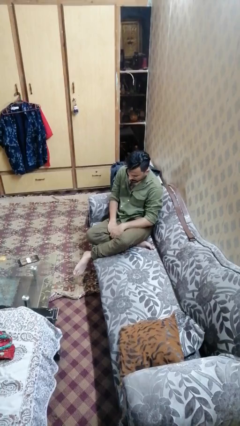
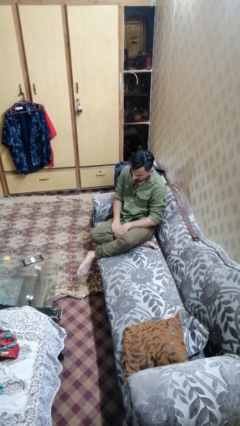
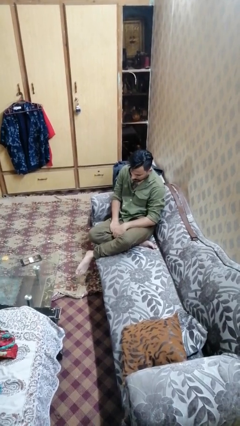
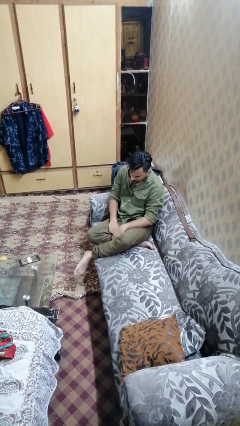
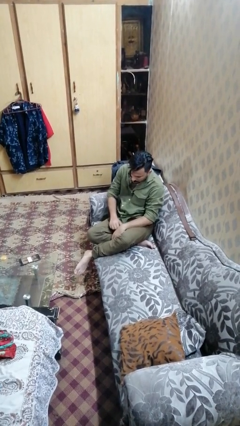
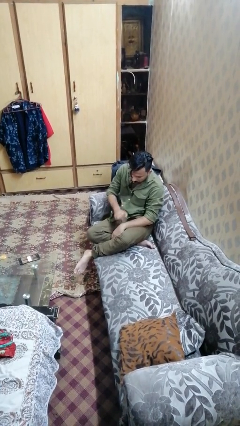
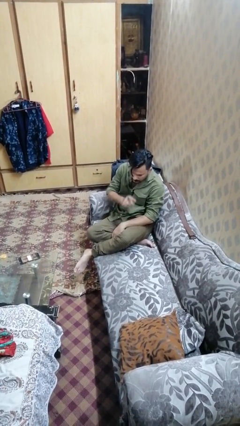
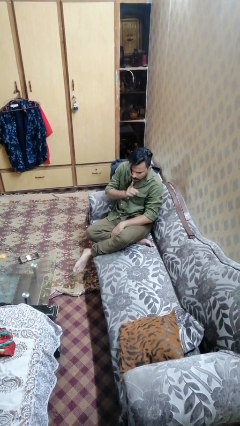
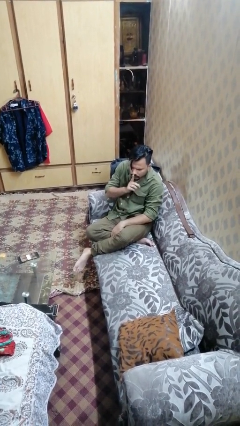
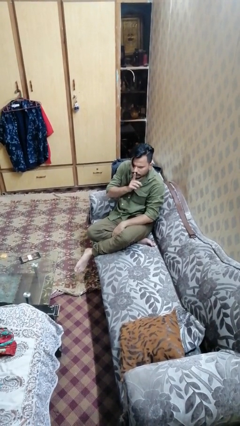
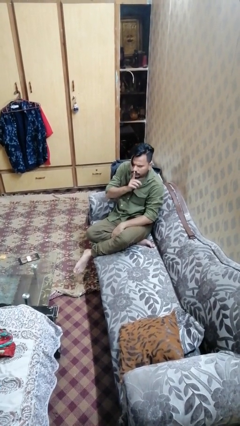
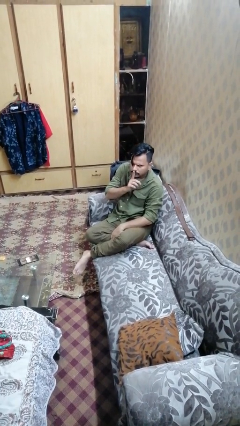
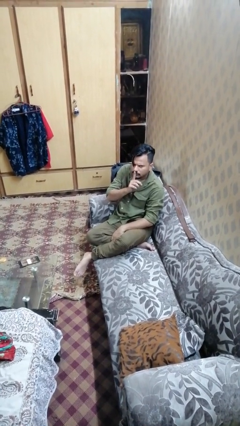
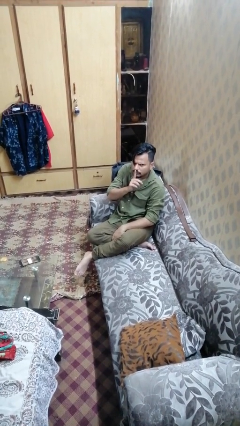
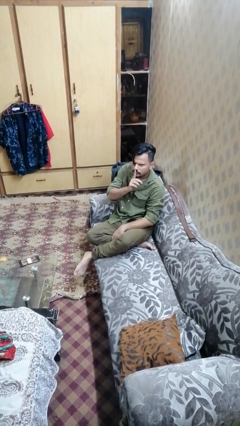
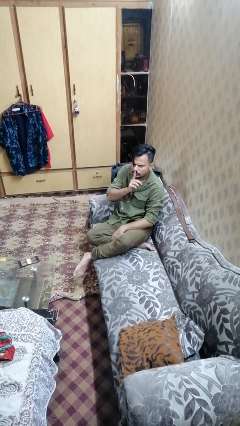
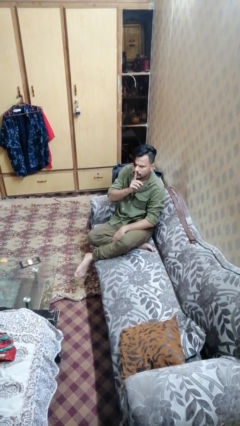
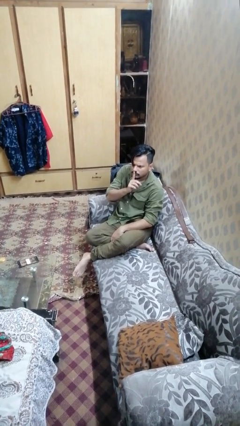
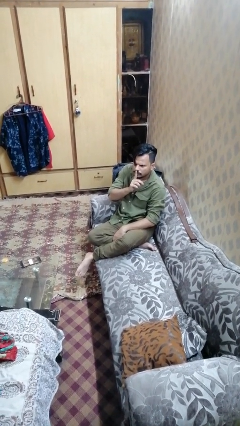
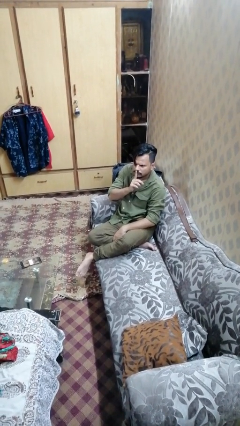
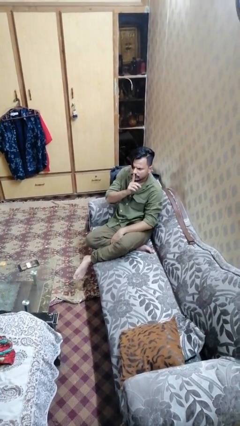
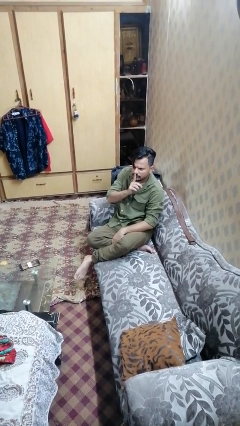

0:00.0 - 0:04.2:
person gestures be quiet

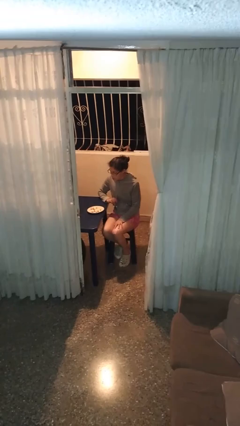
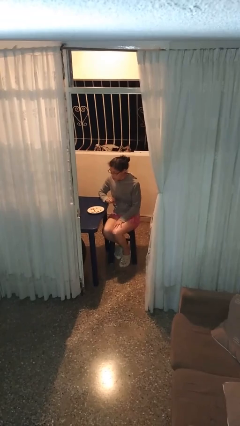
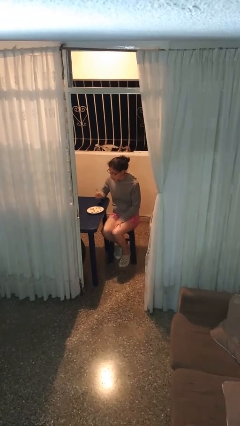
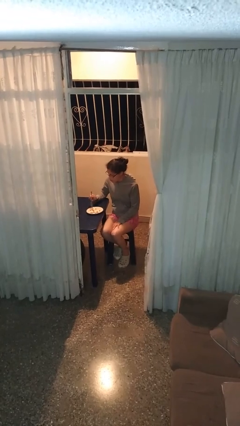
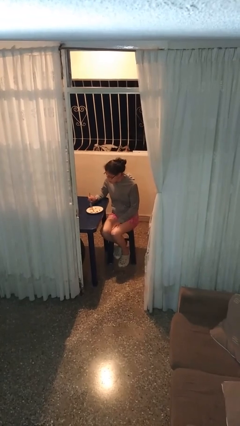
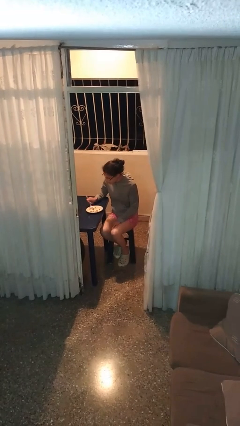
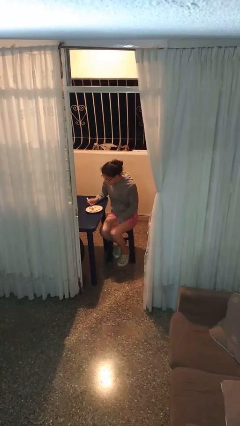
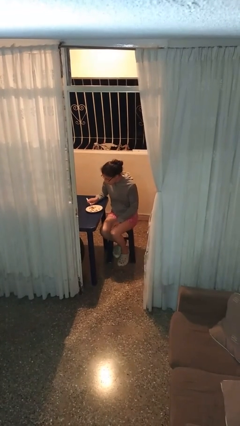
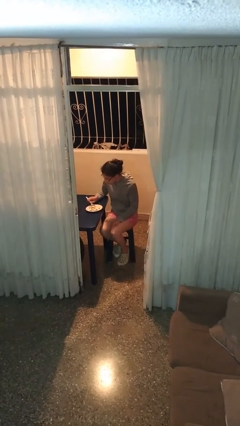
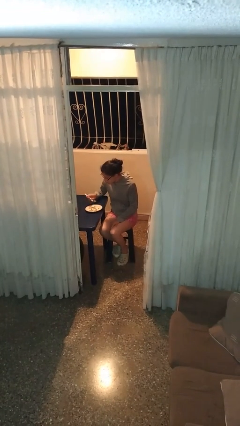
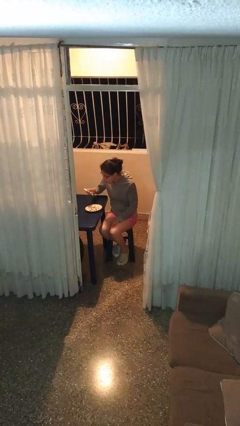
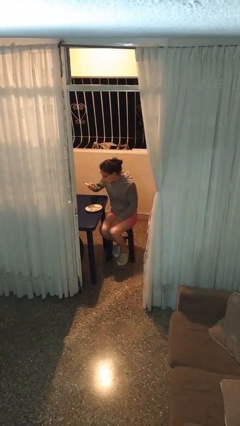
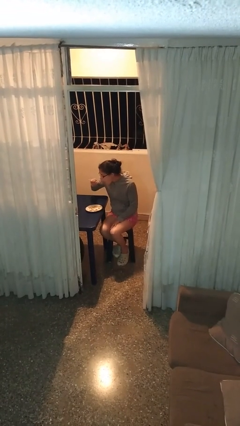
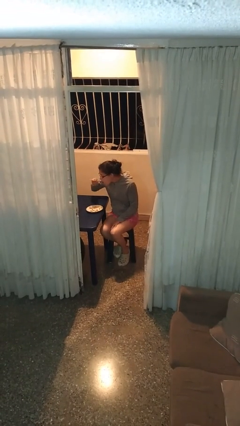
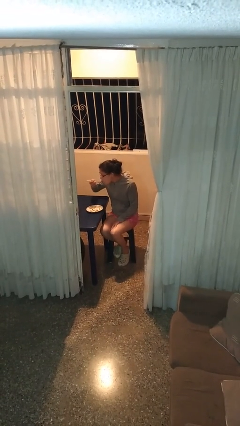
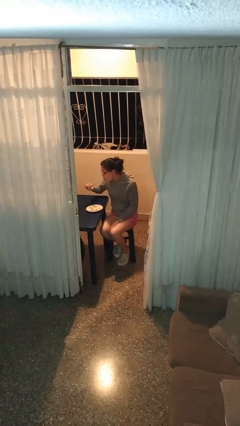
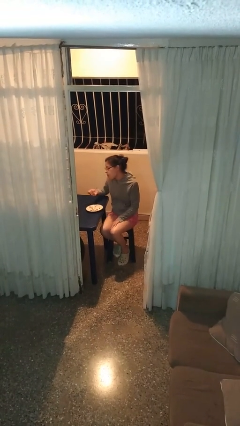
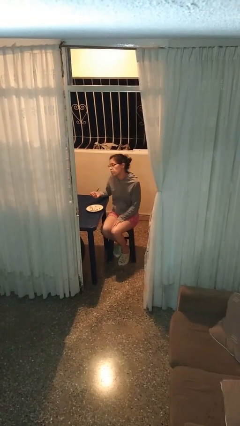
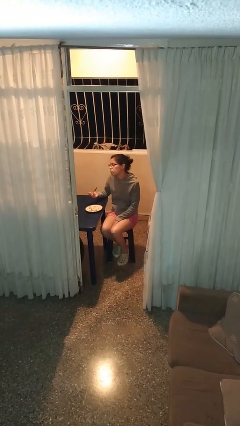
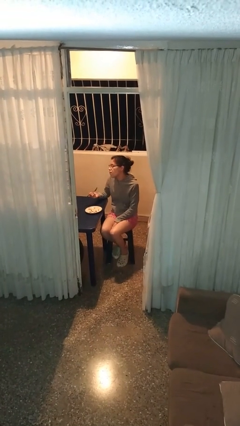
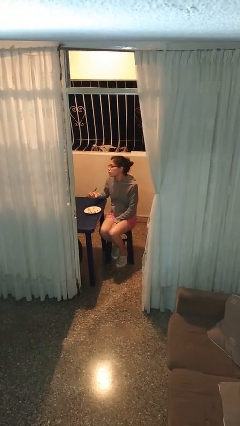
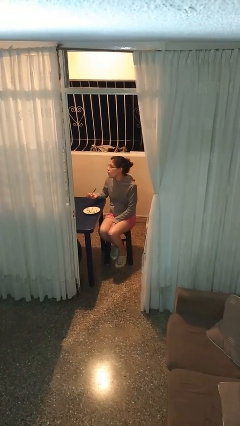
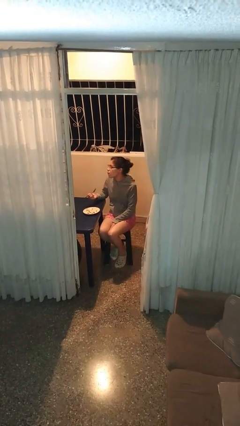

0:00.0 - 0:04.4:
person eats with utensil

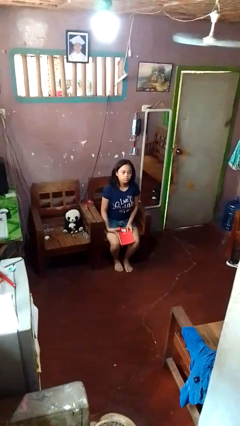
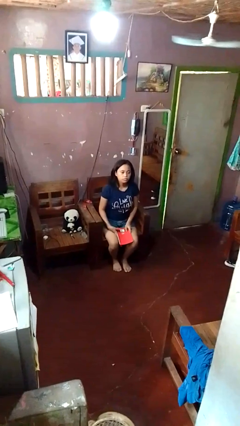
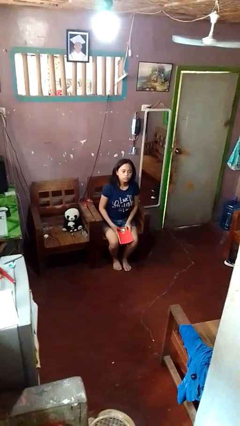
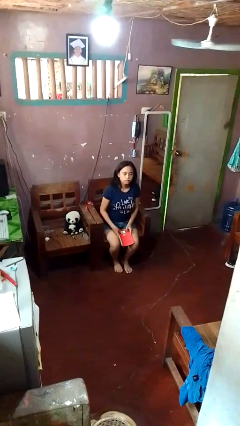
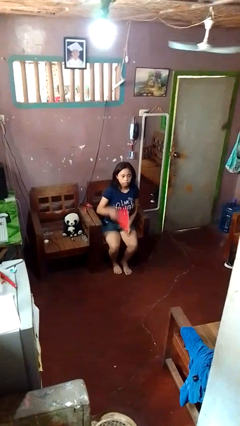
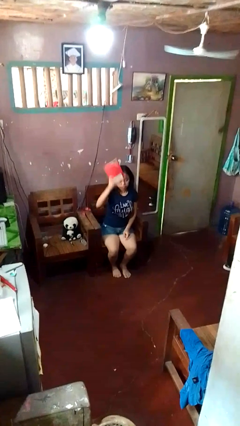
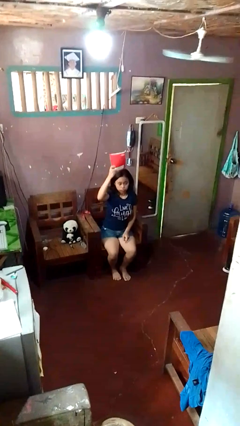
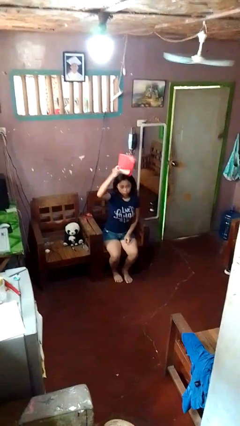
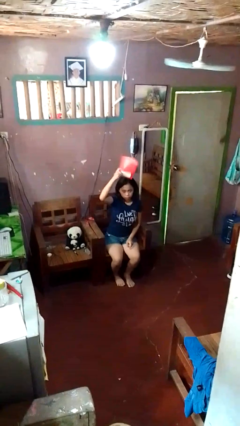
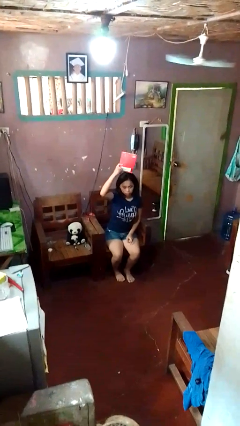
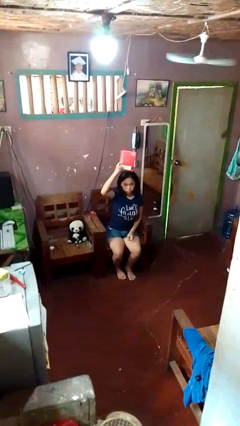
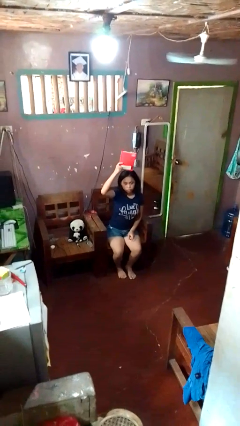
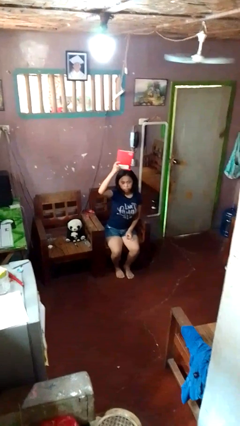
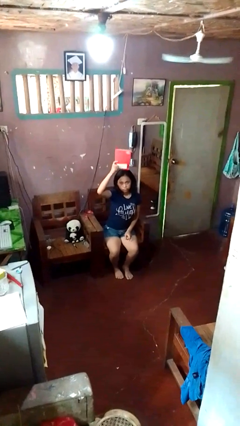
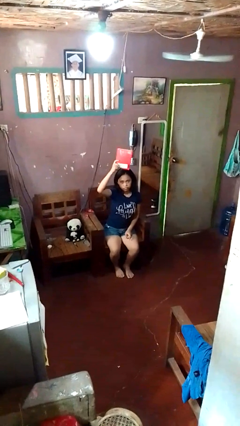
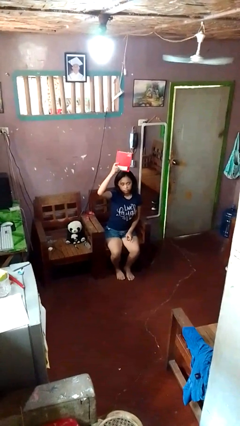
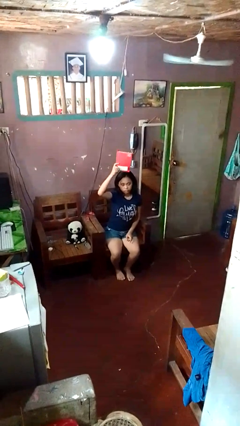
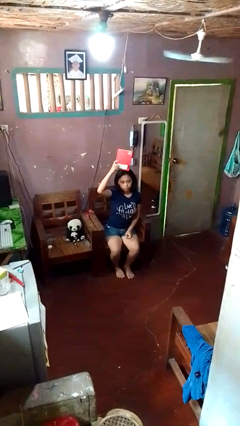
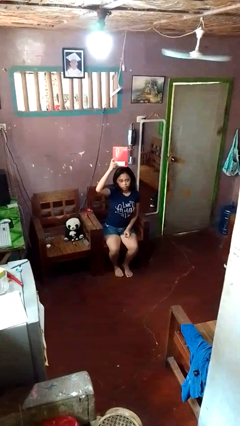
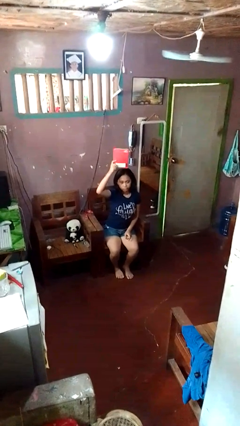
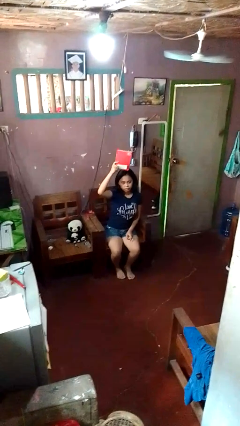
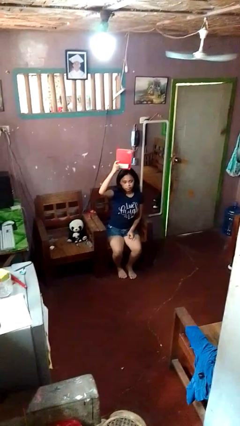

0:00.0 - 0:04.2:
person holds object above head

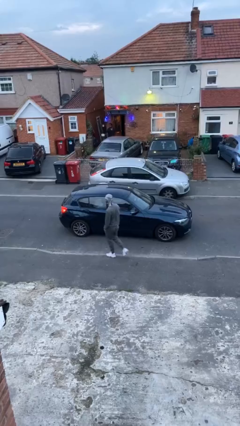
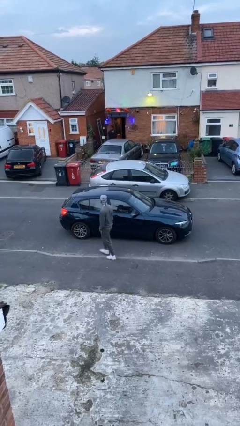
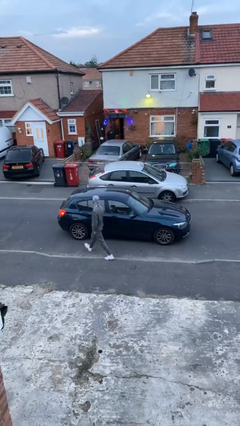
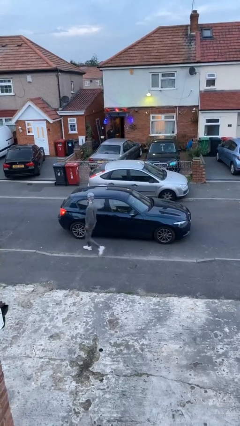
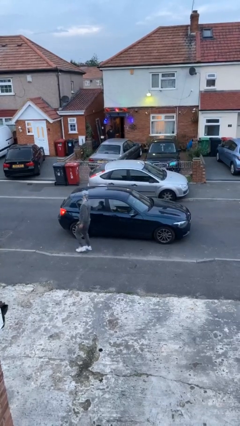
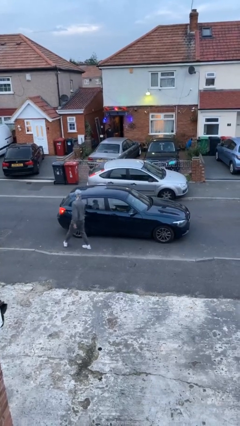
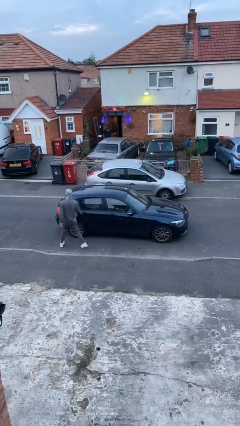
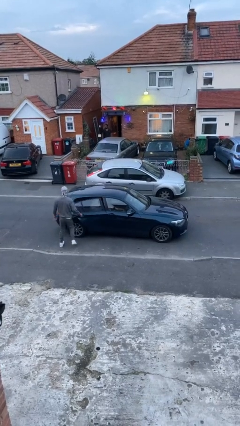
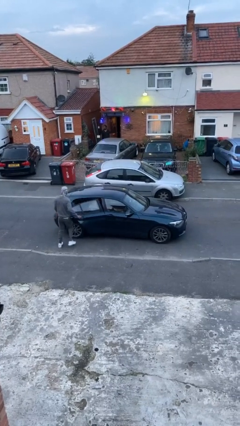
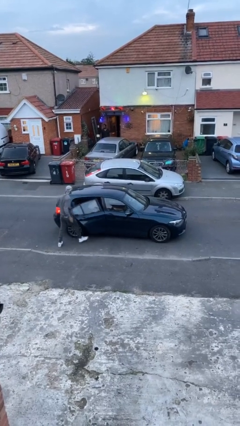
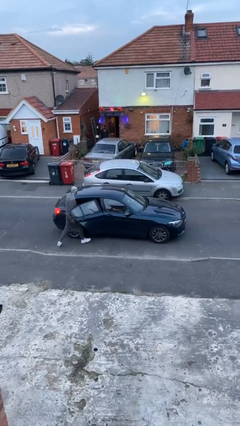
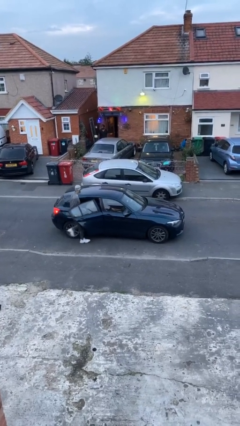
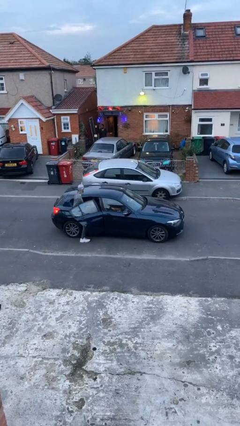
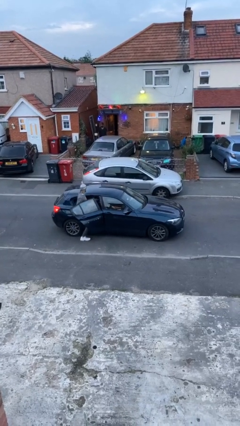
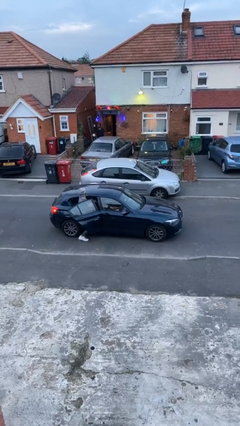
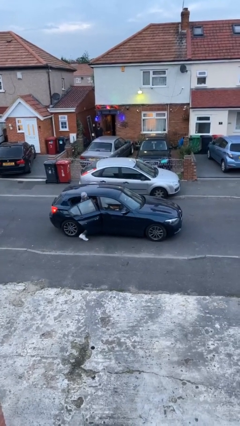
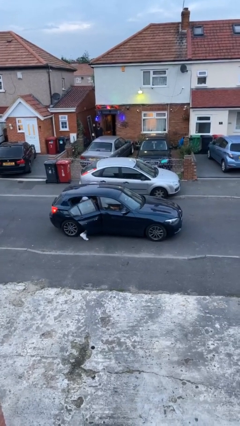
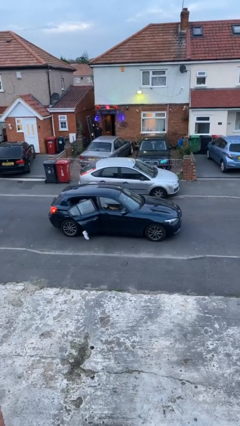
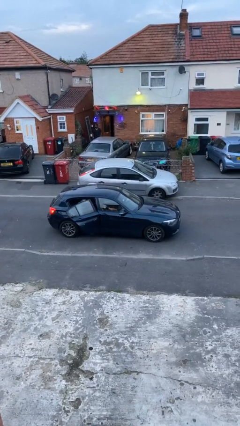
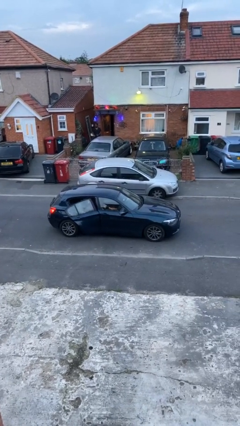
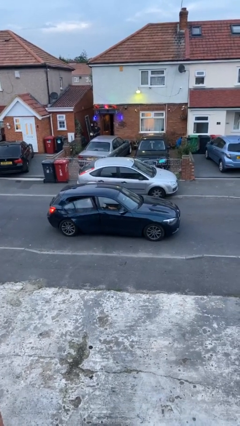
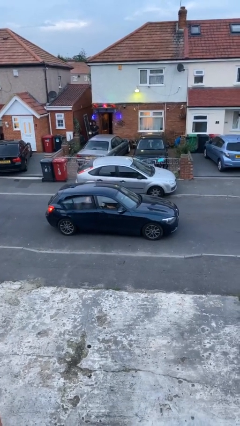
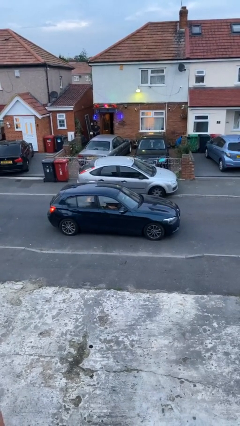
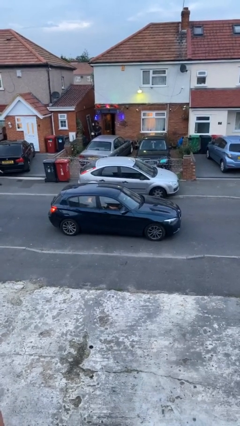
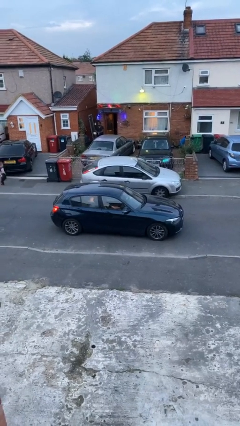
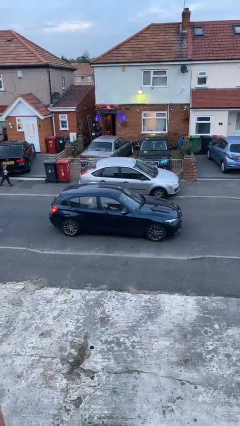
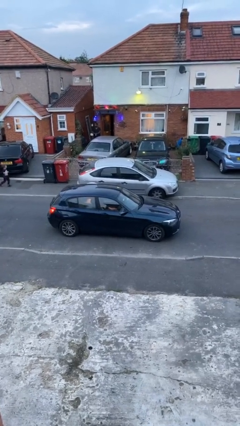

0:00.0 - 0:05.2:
car picks up person
